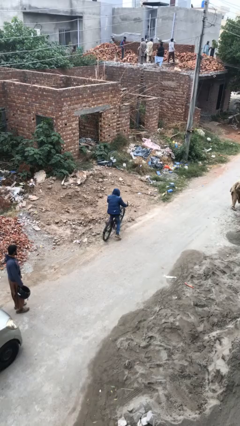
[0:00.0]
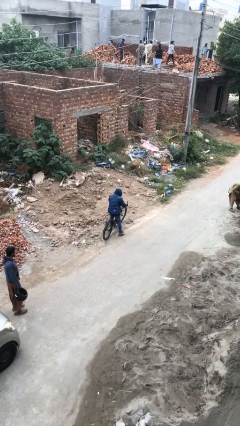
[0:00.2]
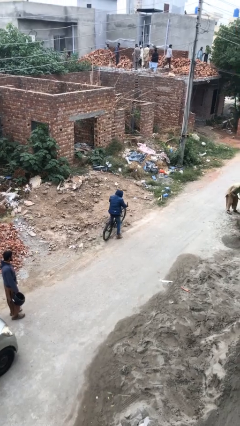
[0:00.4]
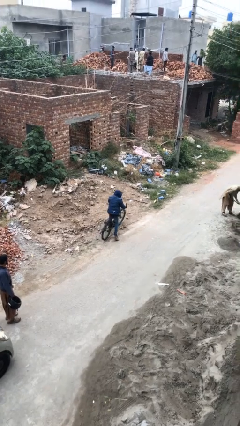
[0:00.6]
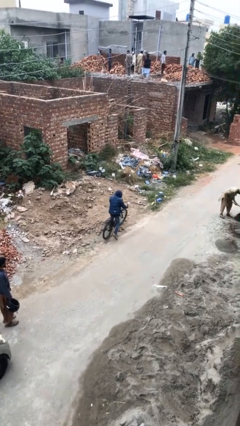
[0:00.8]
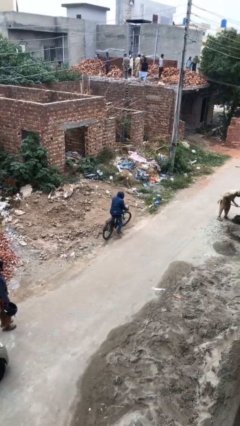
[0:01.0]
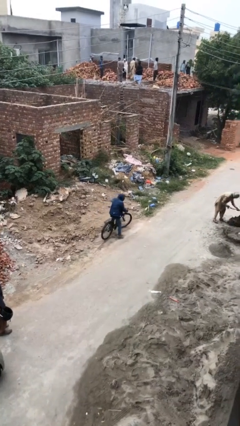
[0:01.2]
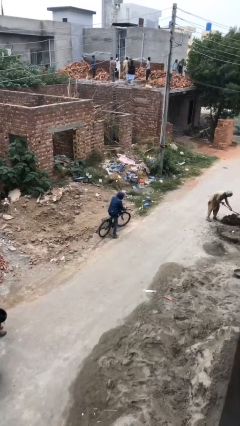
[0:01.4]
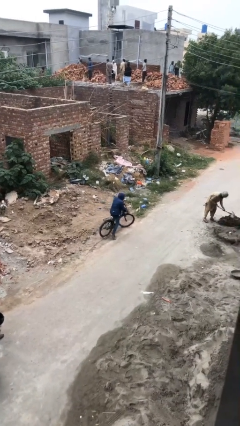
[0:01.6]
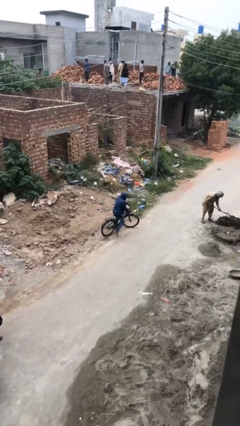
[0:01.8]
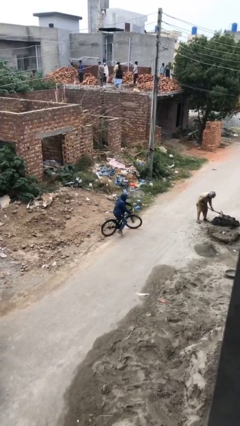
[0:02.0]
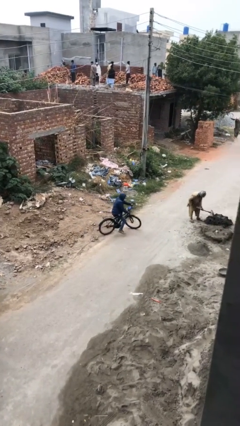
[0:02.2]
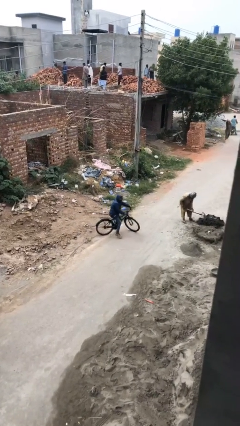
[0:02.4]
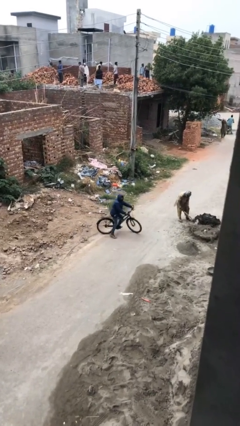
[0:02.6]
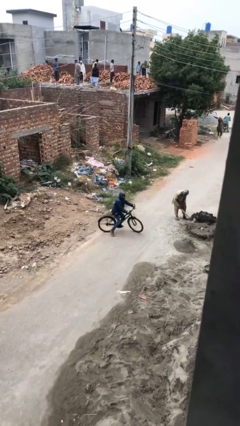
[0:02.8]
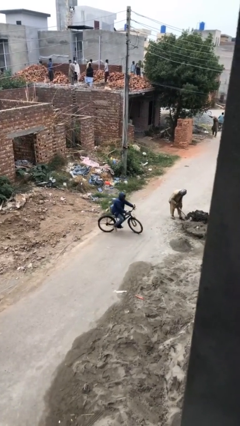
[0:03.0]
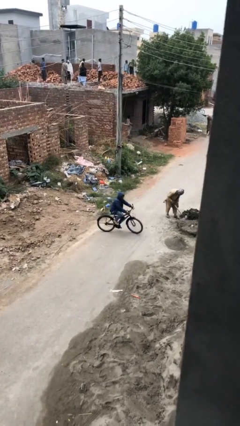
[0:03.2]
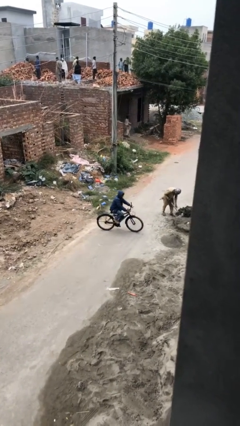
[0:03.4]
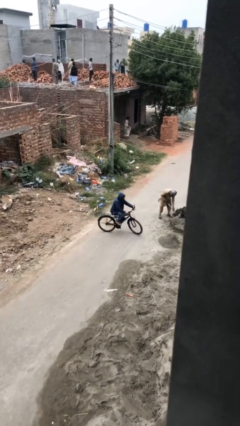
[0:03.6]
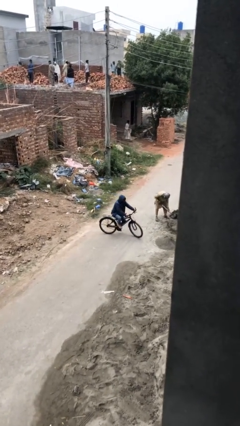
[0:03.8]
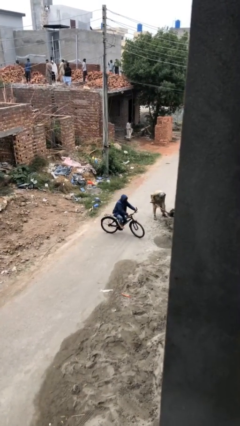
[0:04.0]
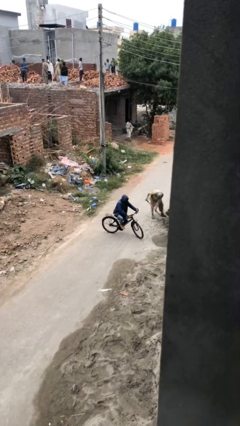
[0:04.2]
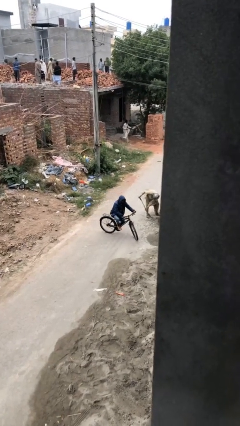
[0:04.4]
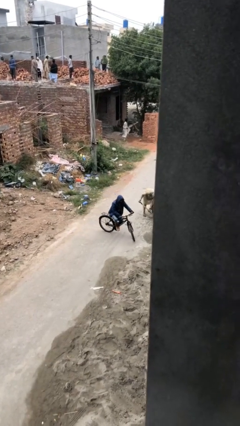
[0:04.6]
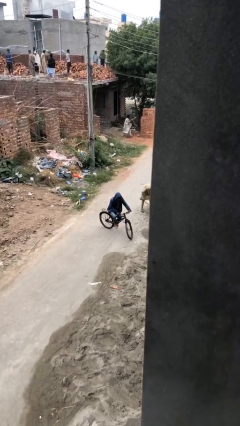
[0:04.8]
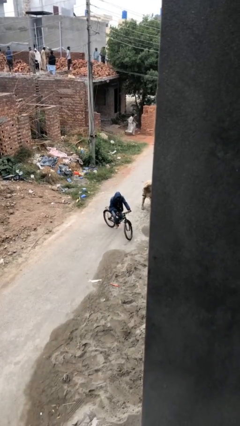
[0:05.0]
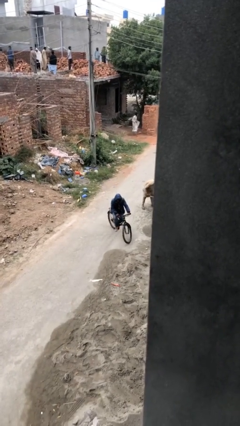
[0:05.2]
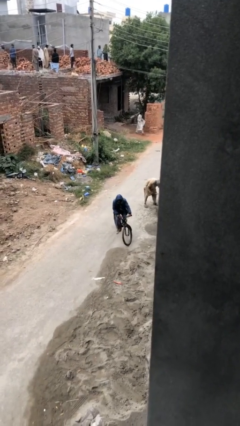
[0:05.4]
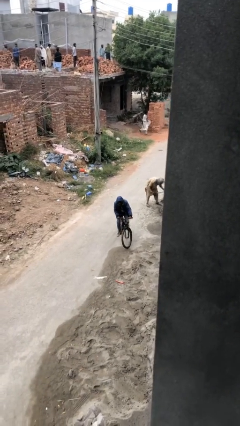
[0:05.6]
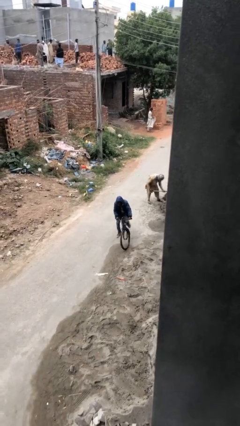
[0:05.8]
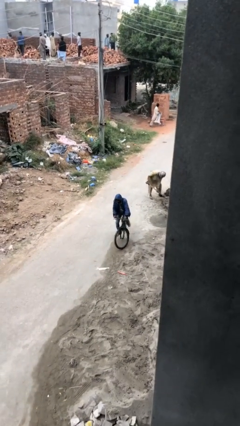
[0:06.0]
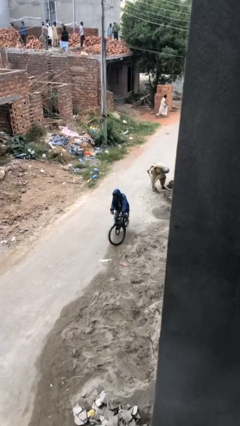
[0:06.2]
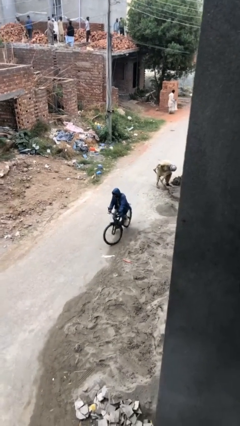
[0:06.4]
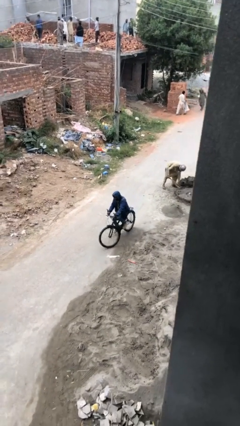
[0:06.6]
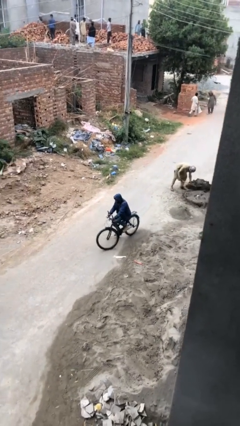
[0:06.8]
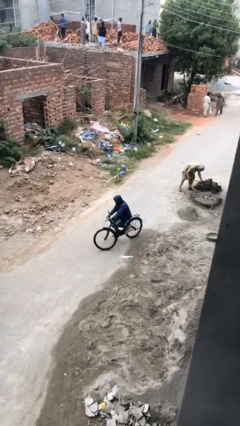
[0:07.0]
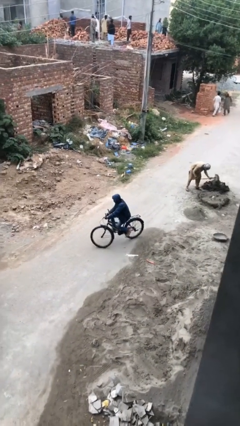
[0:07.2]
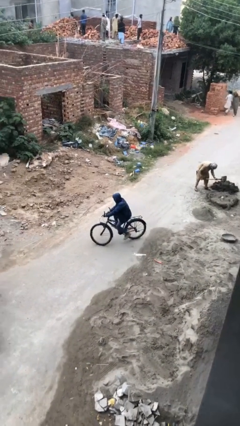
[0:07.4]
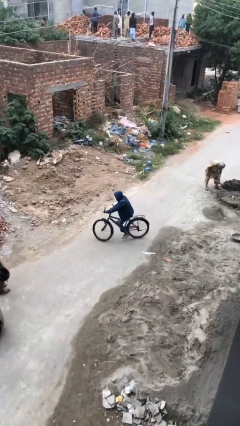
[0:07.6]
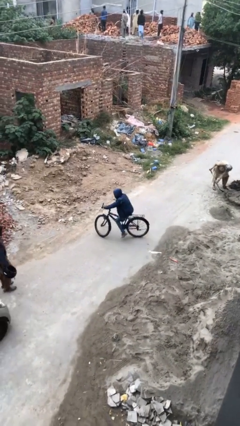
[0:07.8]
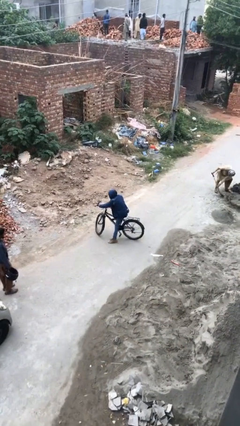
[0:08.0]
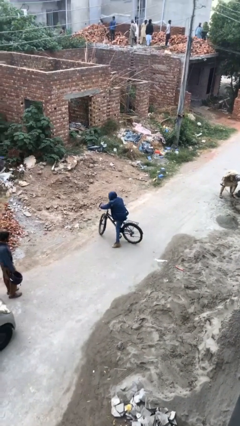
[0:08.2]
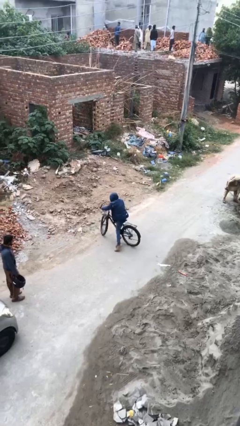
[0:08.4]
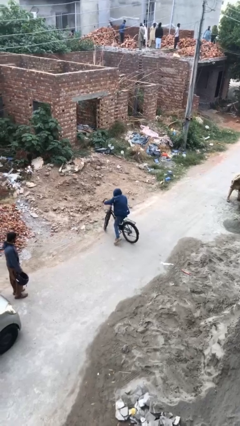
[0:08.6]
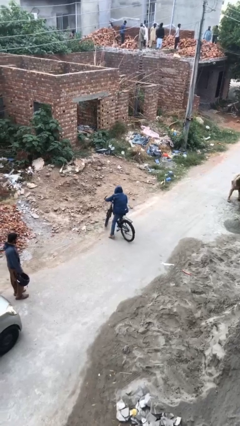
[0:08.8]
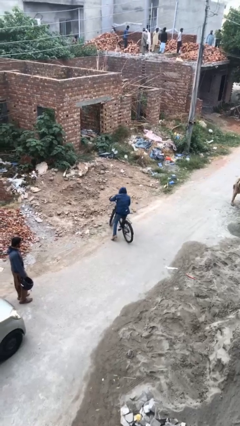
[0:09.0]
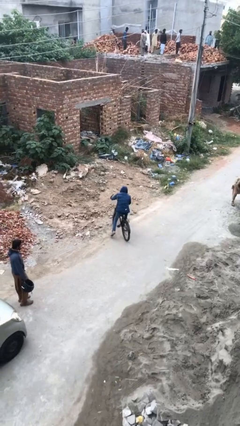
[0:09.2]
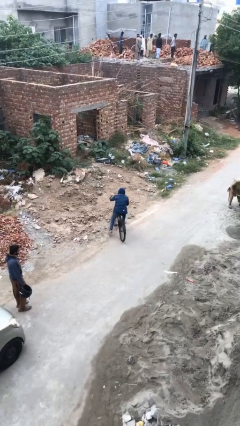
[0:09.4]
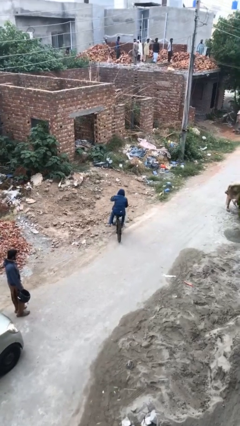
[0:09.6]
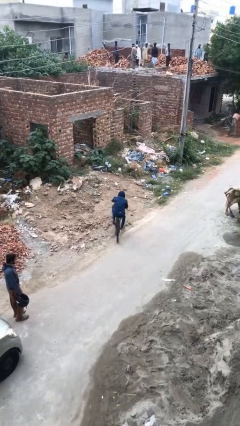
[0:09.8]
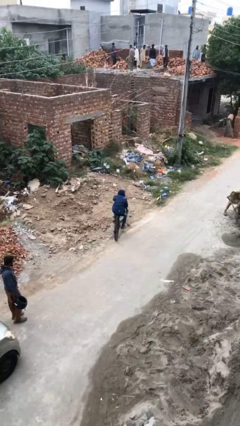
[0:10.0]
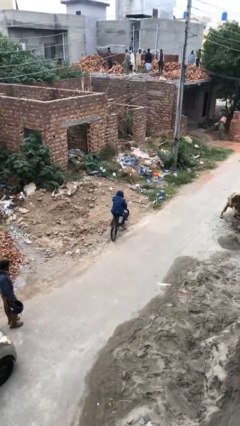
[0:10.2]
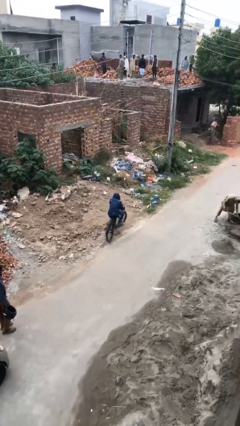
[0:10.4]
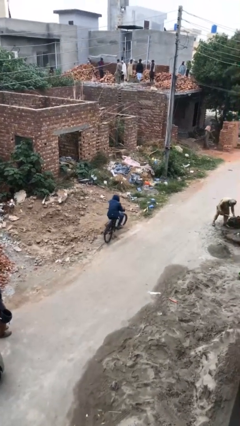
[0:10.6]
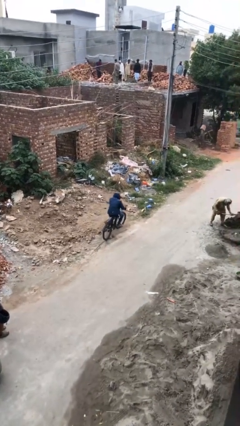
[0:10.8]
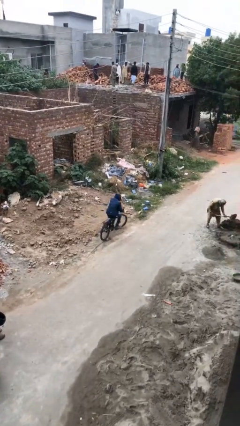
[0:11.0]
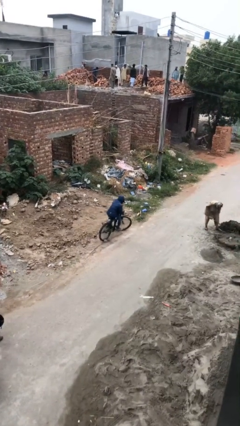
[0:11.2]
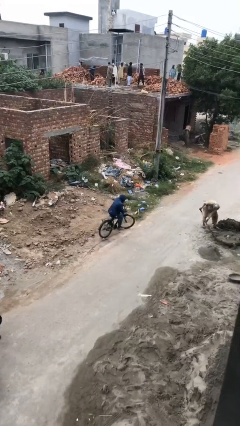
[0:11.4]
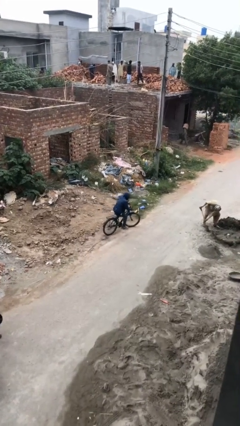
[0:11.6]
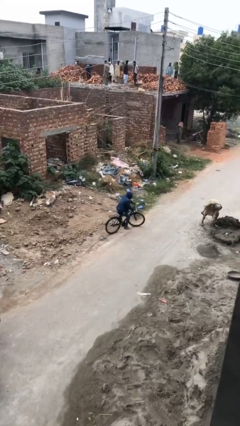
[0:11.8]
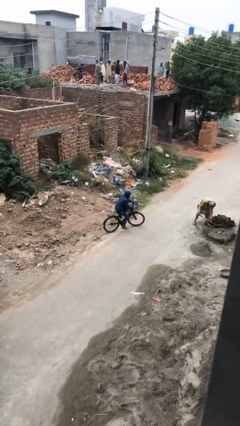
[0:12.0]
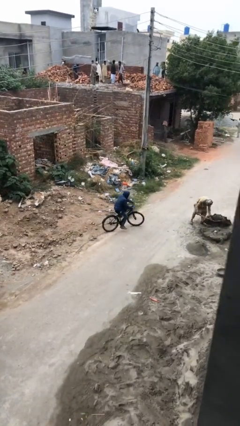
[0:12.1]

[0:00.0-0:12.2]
person rides bicycle

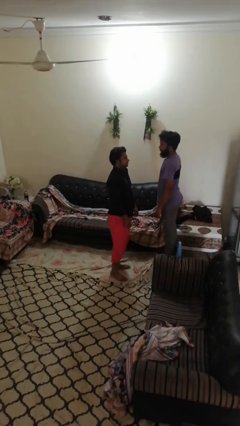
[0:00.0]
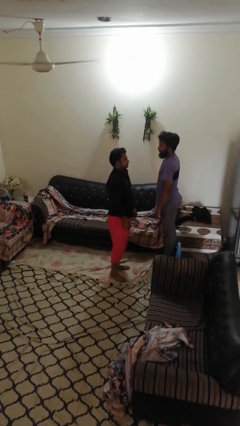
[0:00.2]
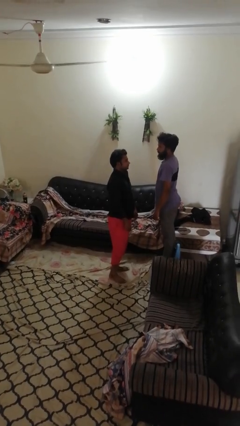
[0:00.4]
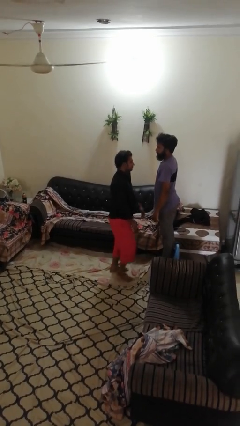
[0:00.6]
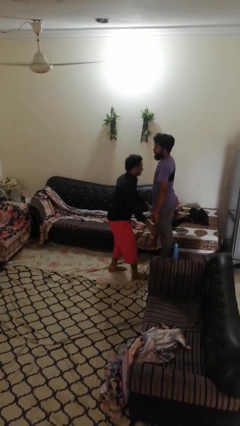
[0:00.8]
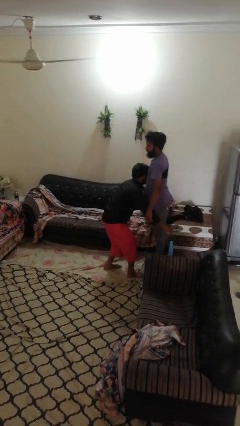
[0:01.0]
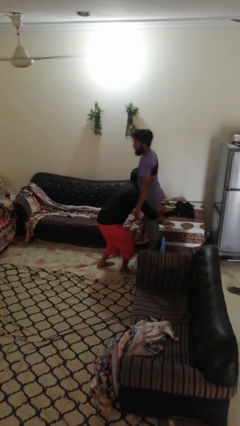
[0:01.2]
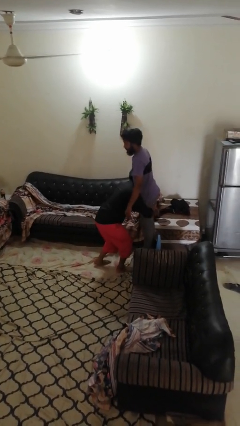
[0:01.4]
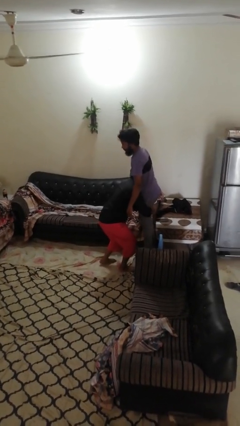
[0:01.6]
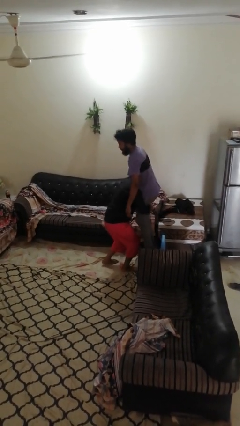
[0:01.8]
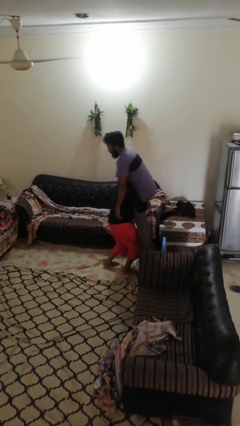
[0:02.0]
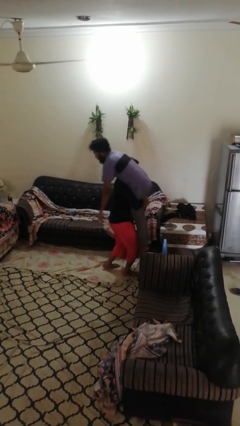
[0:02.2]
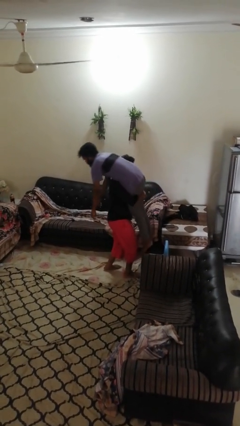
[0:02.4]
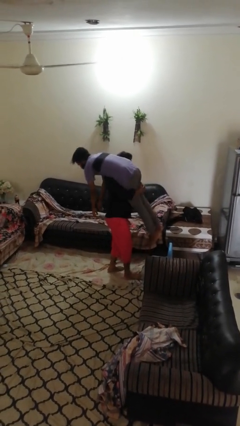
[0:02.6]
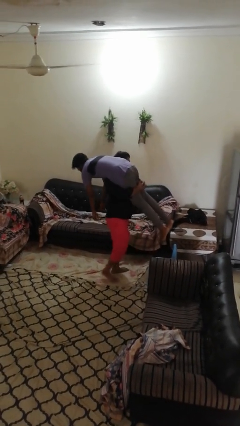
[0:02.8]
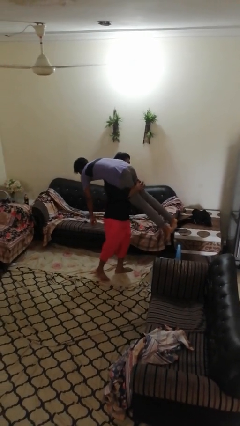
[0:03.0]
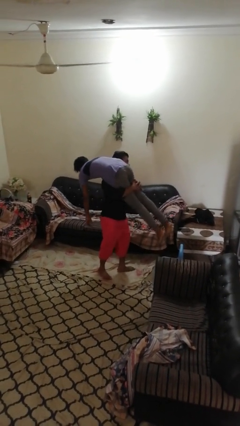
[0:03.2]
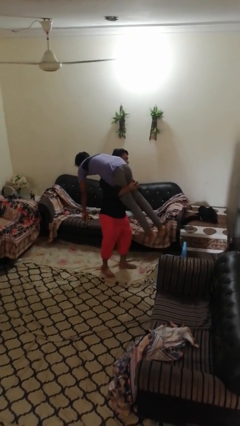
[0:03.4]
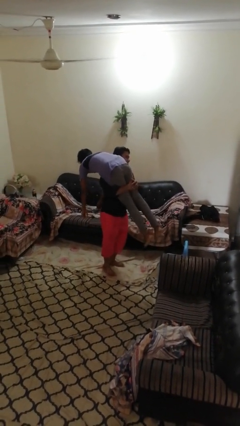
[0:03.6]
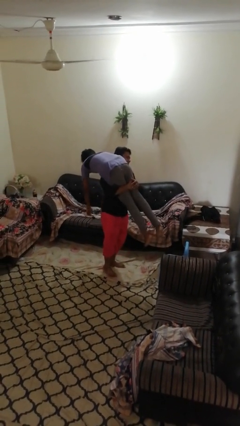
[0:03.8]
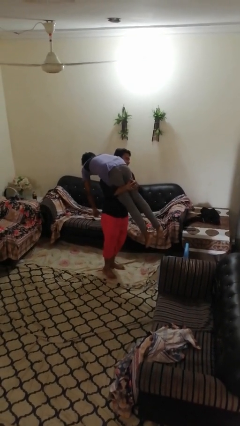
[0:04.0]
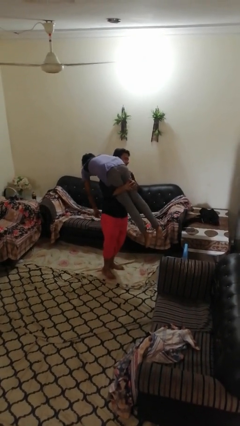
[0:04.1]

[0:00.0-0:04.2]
person carries person over shoulder

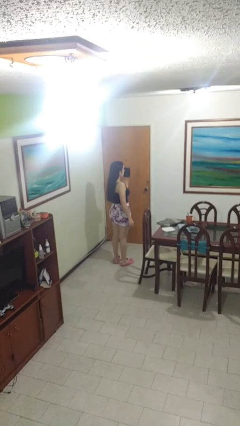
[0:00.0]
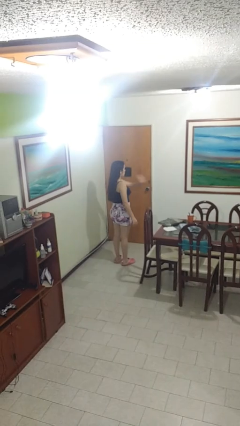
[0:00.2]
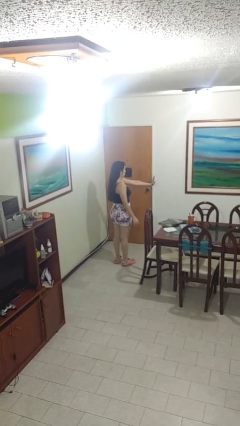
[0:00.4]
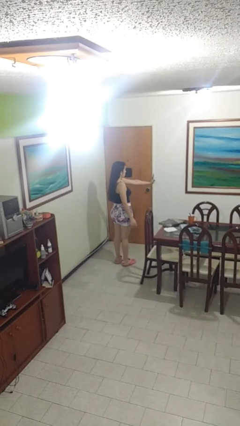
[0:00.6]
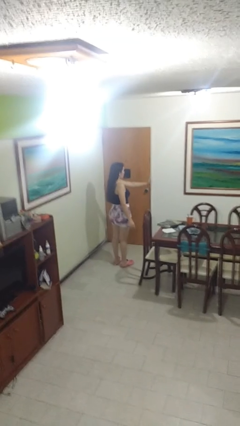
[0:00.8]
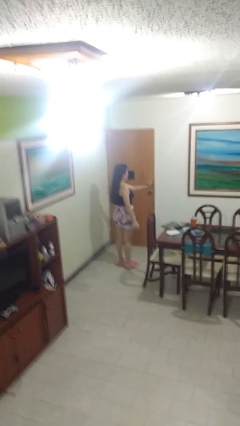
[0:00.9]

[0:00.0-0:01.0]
person gestures stop

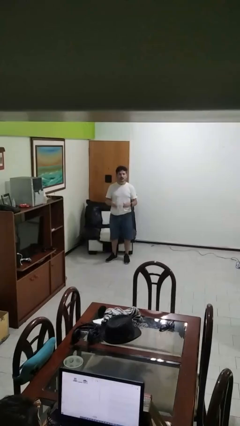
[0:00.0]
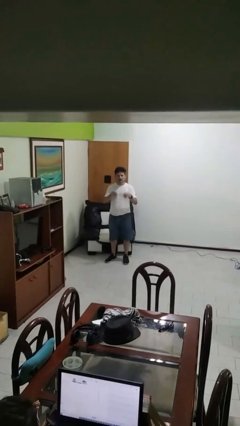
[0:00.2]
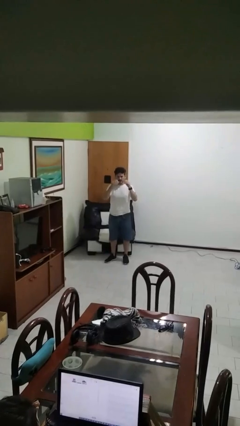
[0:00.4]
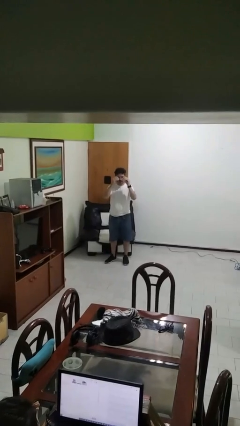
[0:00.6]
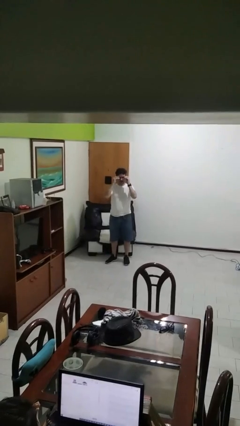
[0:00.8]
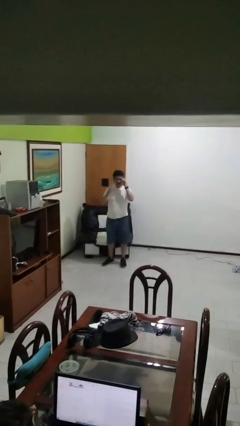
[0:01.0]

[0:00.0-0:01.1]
person puts on glasses
